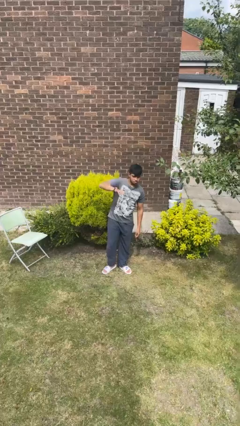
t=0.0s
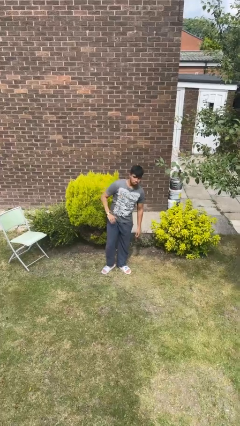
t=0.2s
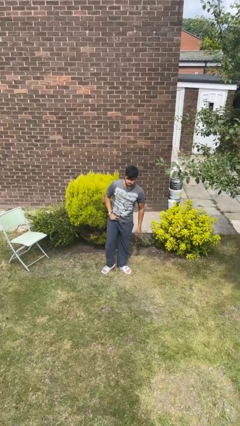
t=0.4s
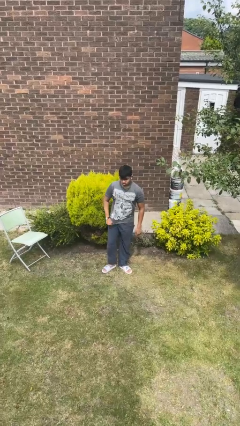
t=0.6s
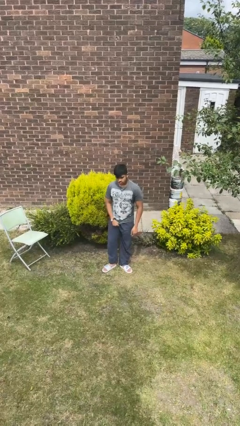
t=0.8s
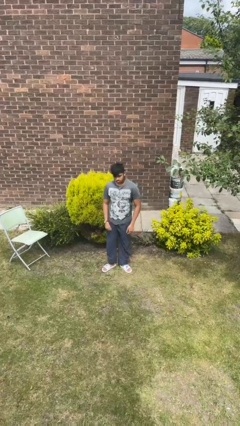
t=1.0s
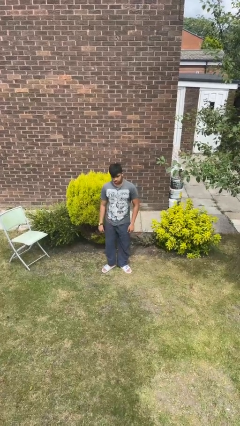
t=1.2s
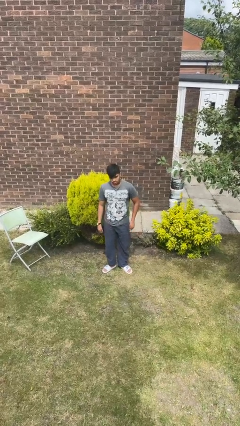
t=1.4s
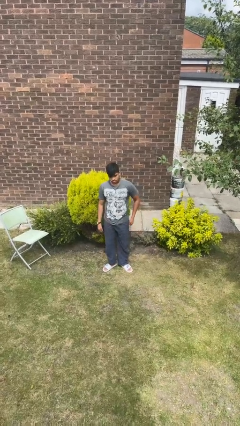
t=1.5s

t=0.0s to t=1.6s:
person gestures lower hand

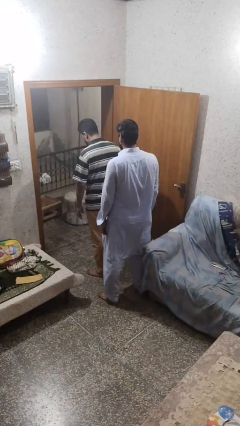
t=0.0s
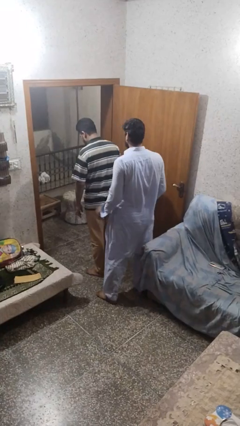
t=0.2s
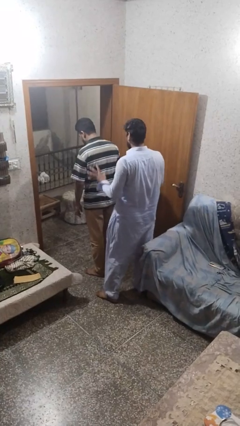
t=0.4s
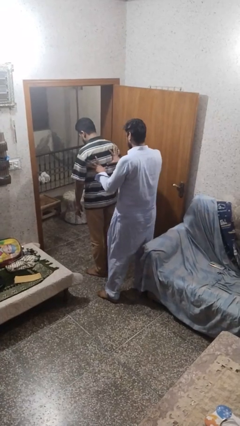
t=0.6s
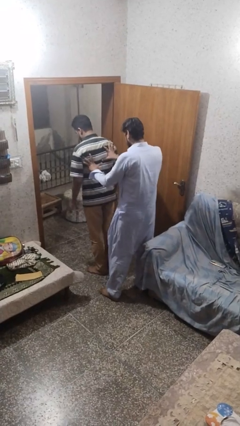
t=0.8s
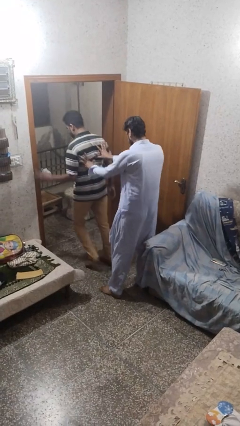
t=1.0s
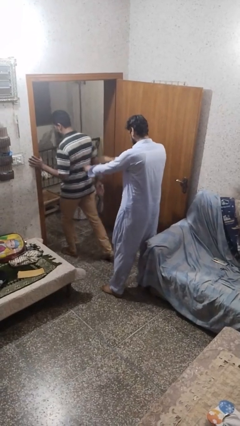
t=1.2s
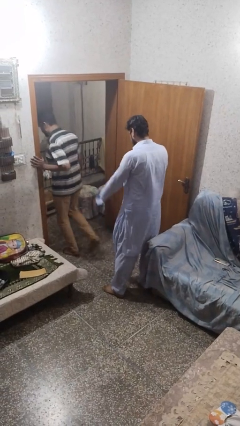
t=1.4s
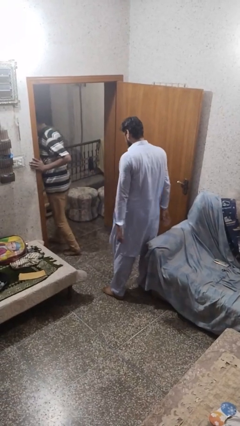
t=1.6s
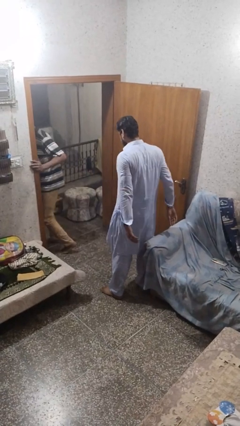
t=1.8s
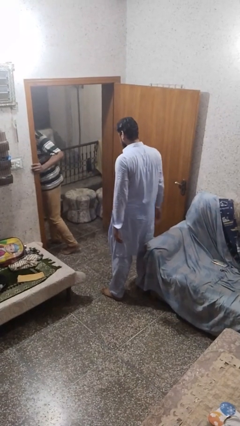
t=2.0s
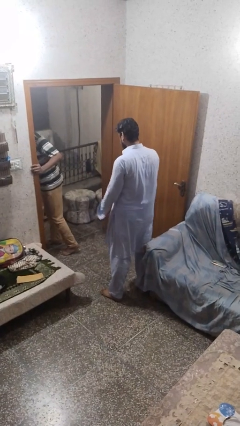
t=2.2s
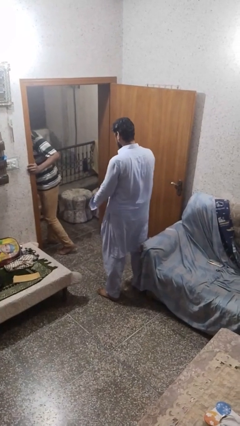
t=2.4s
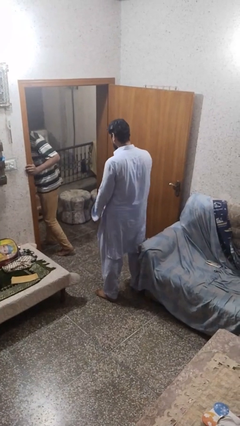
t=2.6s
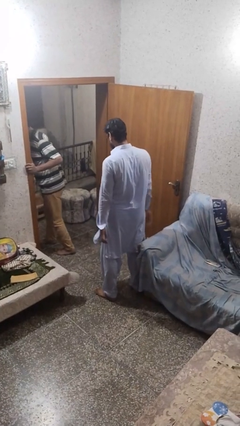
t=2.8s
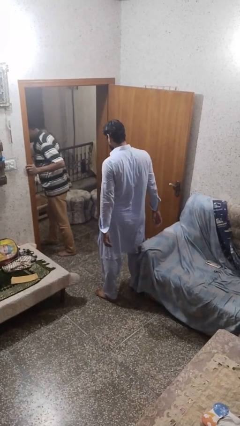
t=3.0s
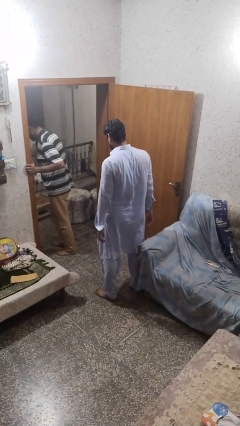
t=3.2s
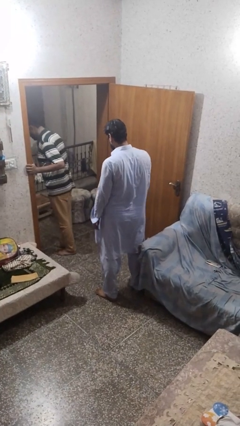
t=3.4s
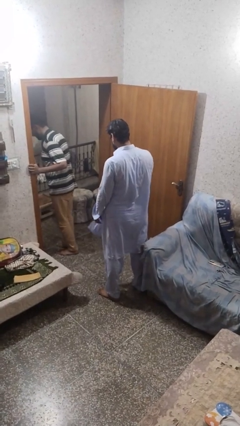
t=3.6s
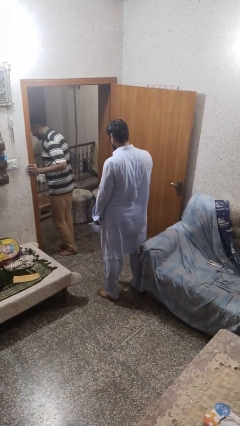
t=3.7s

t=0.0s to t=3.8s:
person shoves person

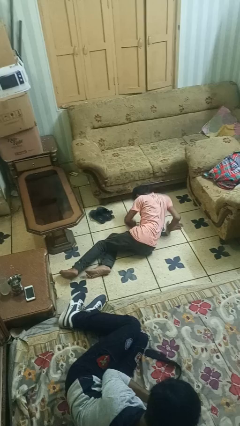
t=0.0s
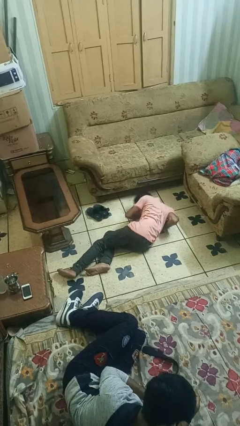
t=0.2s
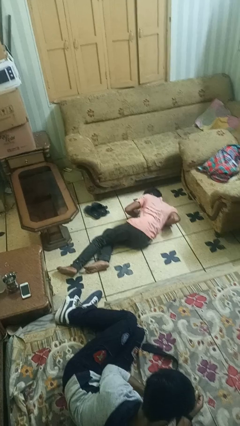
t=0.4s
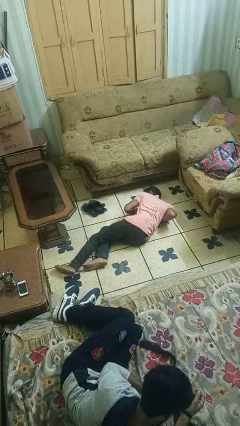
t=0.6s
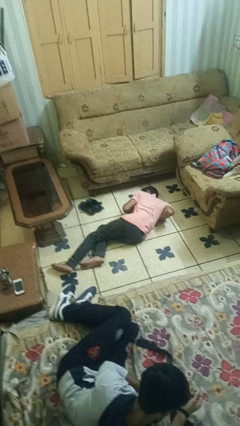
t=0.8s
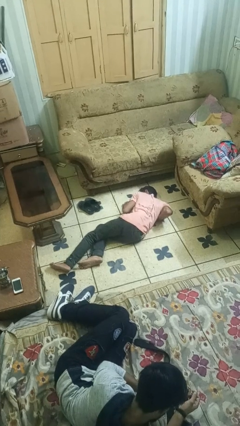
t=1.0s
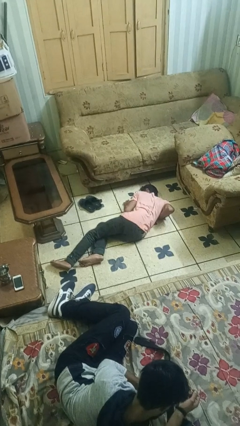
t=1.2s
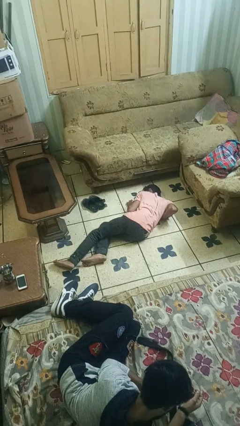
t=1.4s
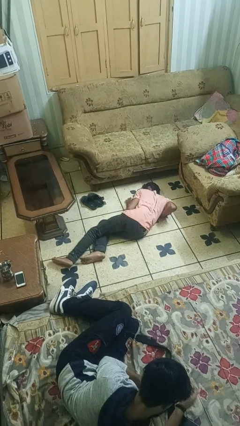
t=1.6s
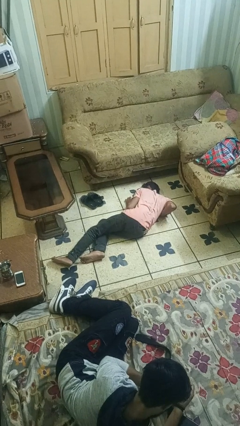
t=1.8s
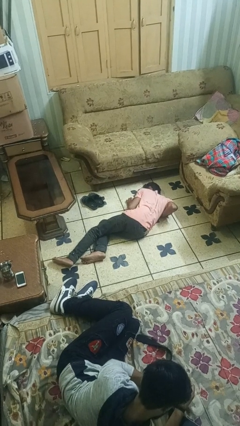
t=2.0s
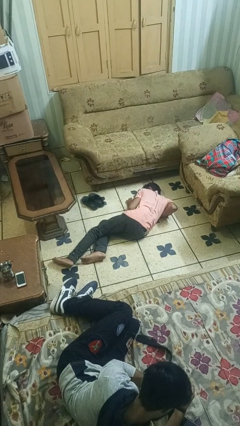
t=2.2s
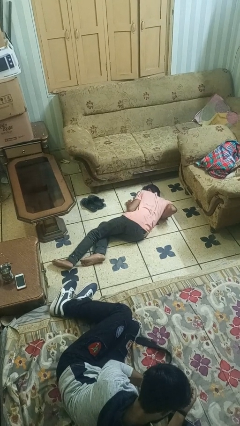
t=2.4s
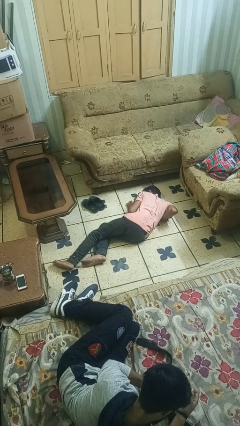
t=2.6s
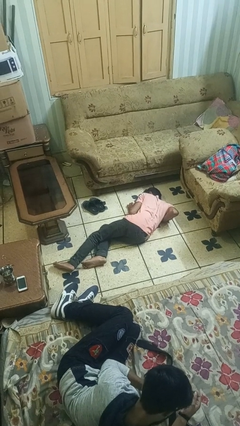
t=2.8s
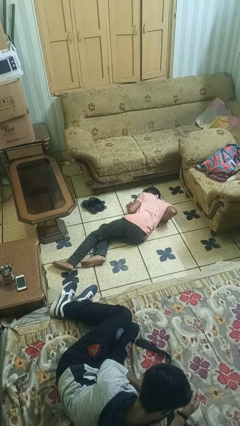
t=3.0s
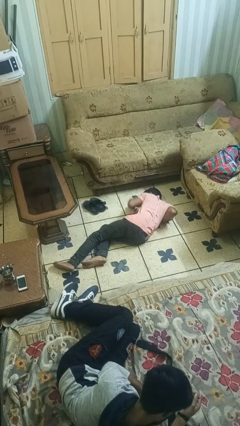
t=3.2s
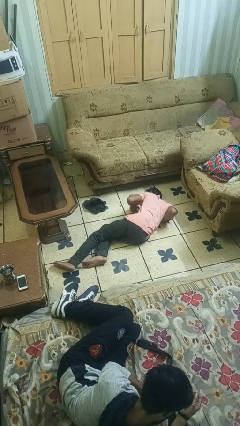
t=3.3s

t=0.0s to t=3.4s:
person lies down on floor

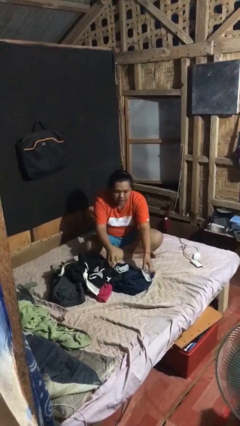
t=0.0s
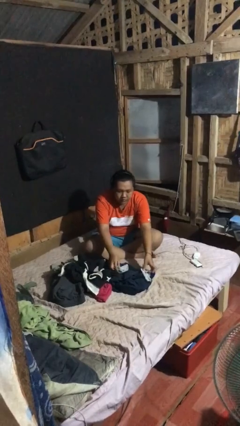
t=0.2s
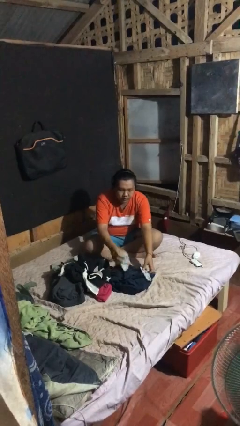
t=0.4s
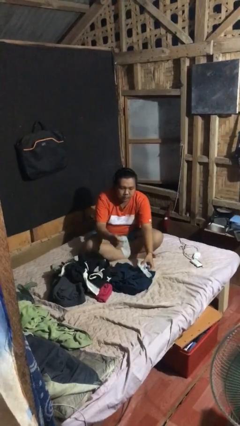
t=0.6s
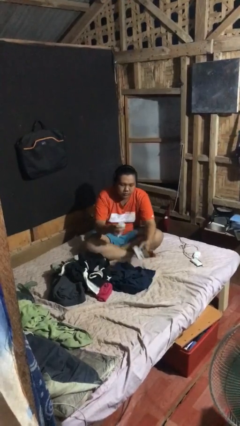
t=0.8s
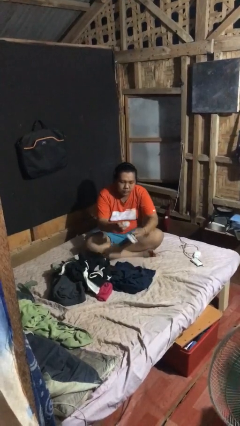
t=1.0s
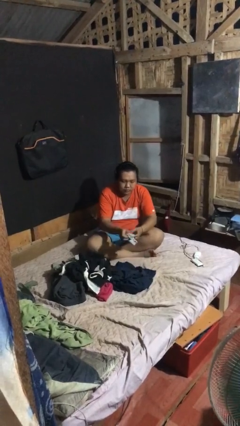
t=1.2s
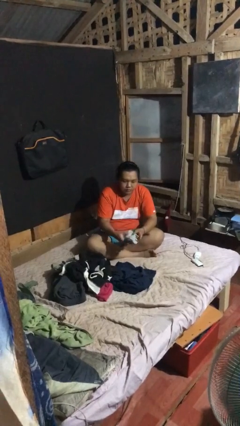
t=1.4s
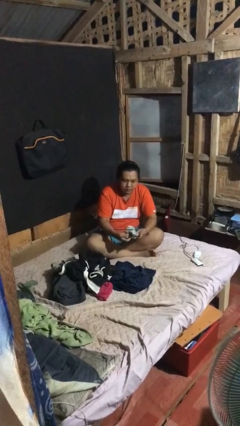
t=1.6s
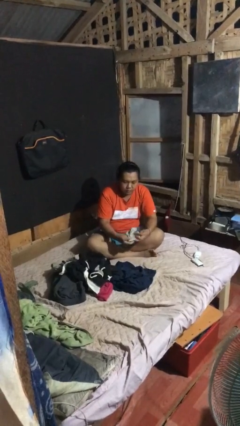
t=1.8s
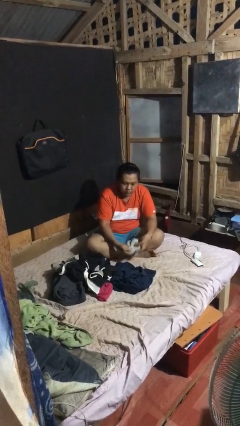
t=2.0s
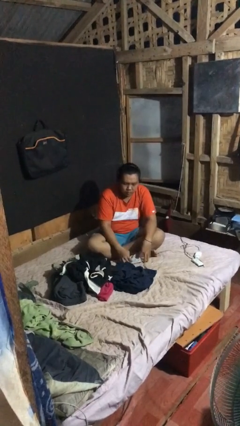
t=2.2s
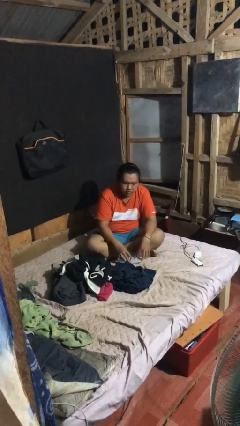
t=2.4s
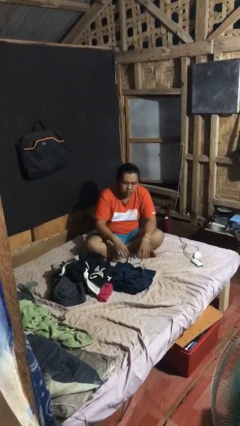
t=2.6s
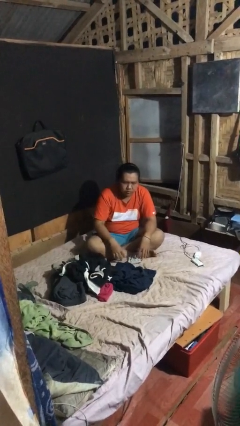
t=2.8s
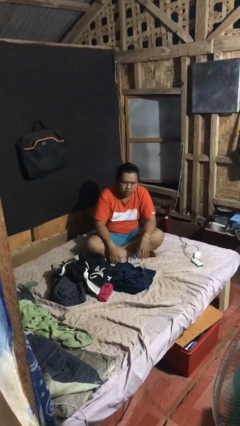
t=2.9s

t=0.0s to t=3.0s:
person folds socks

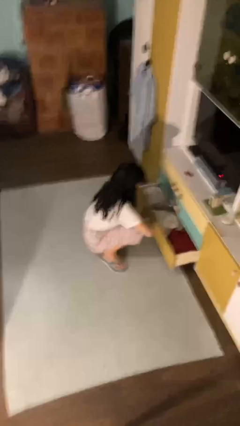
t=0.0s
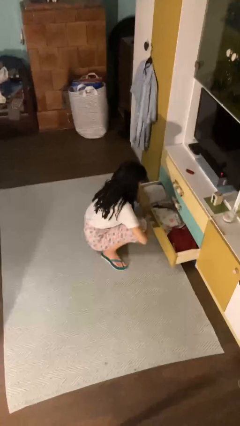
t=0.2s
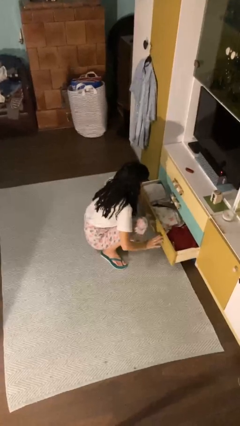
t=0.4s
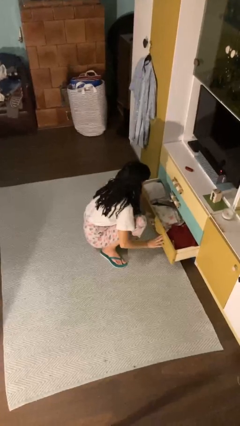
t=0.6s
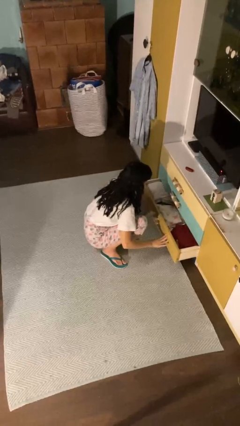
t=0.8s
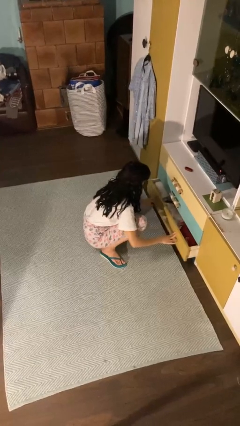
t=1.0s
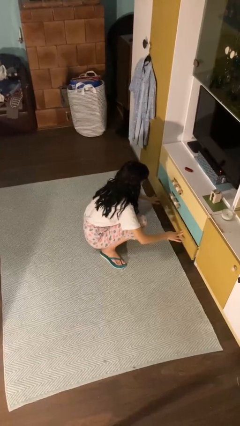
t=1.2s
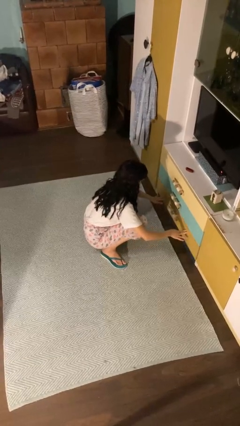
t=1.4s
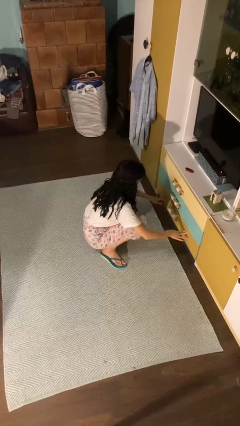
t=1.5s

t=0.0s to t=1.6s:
person closes dresser drawer

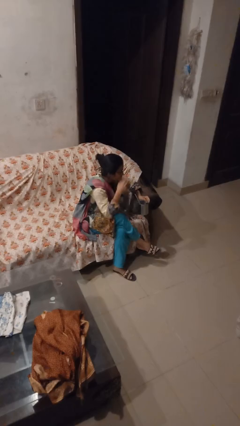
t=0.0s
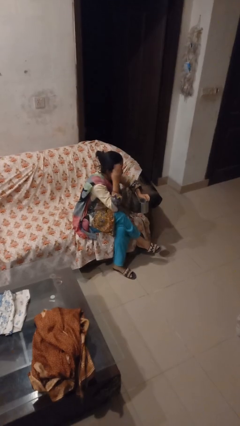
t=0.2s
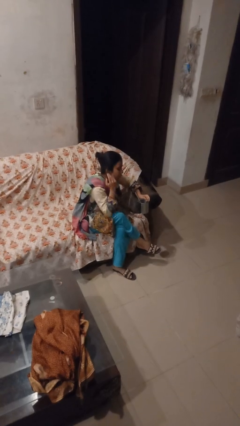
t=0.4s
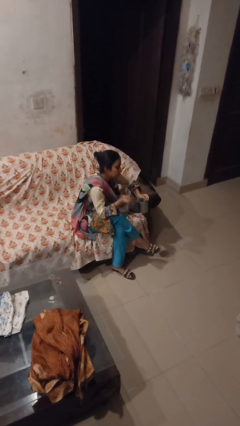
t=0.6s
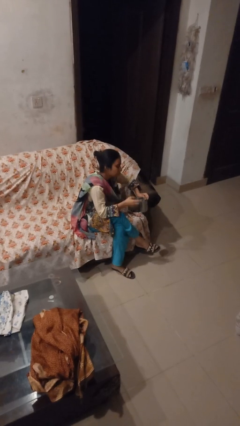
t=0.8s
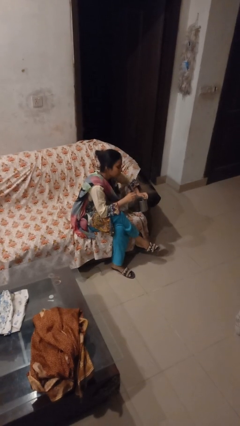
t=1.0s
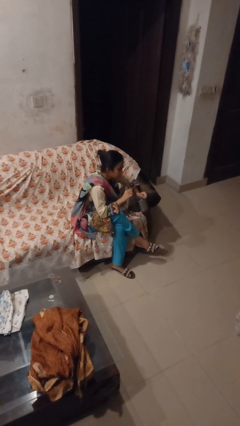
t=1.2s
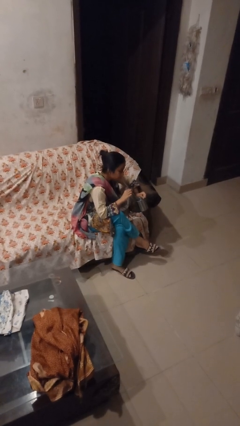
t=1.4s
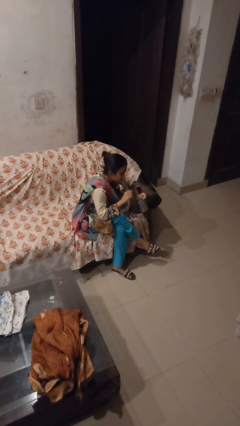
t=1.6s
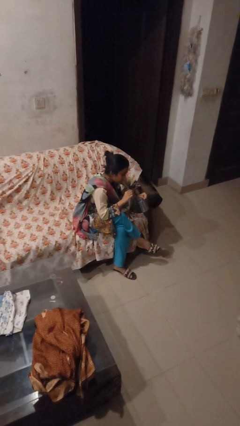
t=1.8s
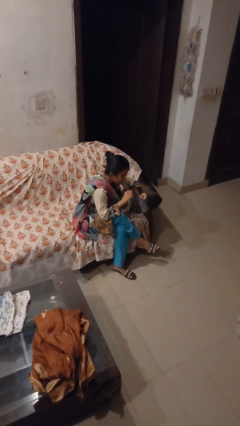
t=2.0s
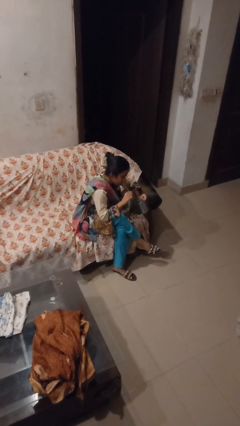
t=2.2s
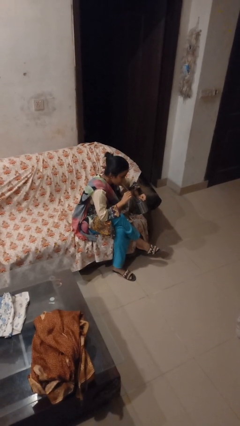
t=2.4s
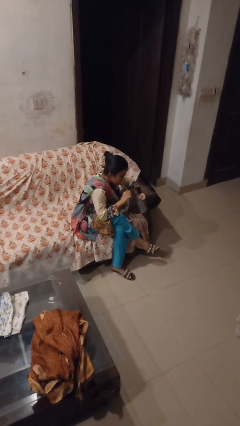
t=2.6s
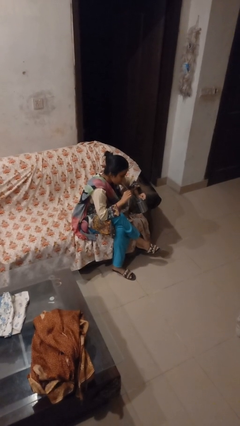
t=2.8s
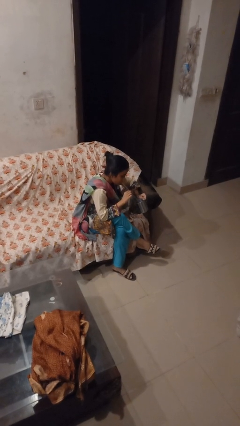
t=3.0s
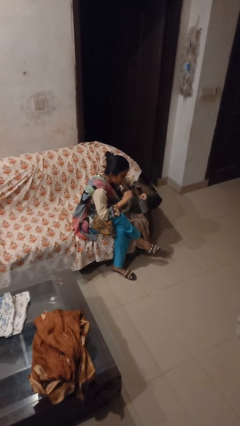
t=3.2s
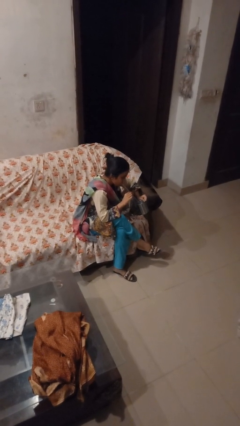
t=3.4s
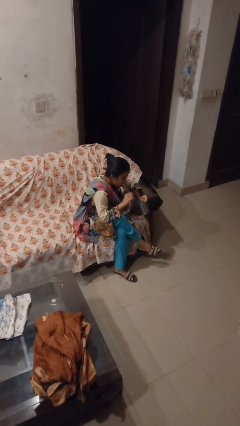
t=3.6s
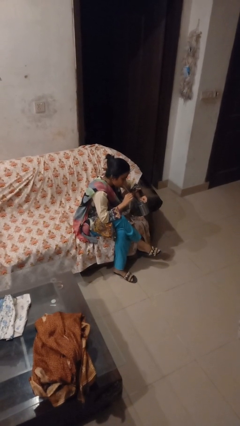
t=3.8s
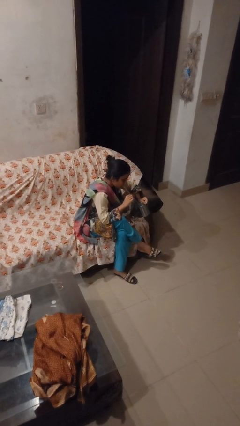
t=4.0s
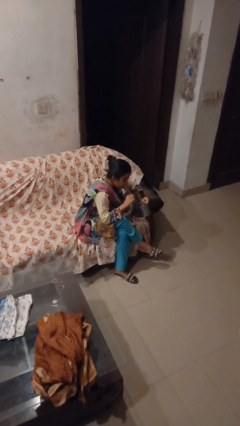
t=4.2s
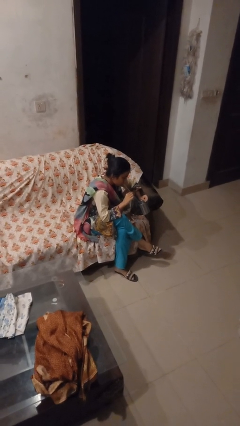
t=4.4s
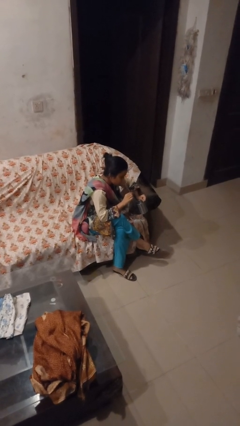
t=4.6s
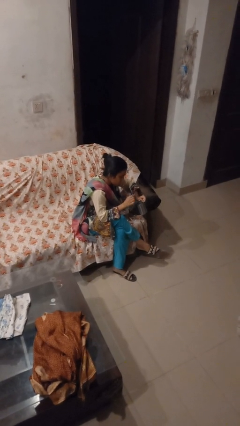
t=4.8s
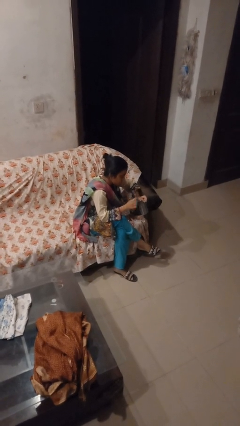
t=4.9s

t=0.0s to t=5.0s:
person drinks from straw
